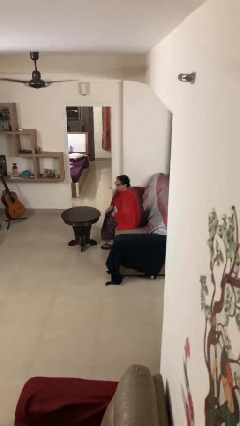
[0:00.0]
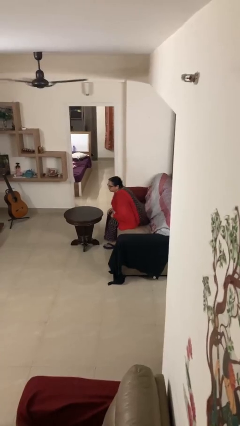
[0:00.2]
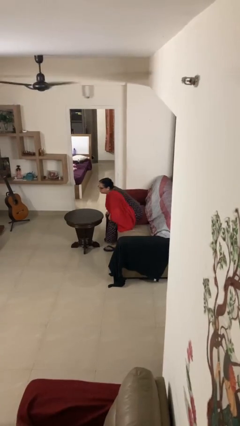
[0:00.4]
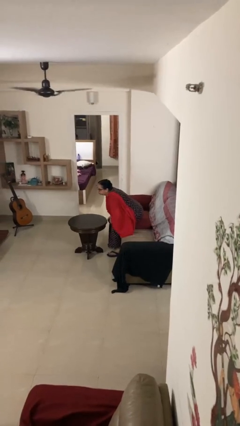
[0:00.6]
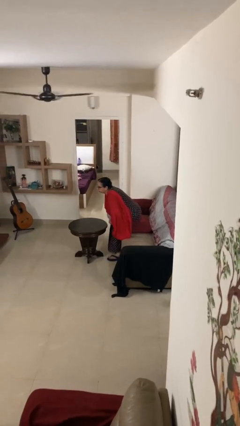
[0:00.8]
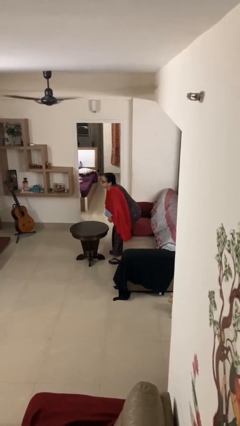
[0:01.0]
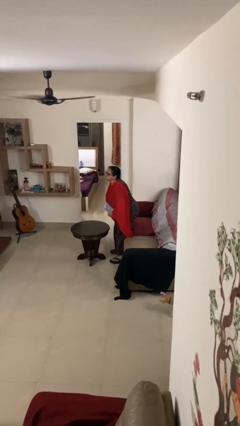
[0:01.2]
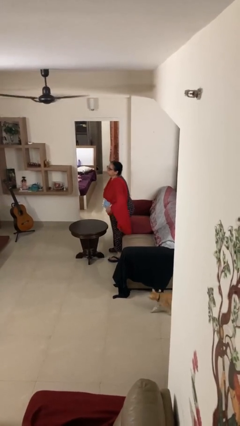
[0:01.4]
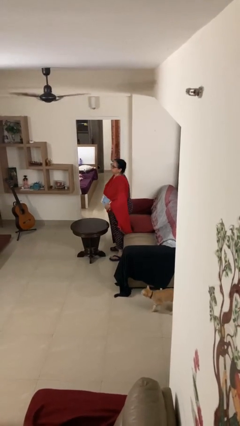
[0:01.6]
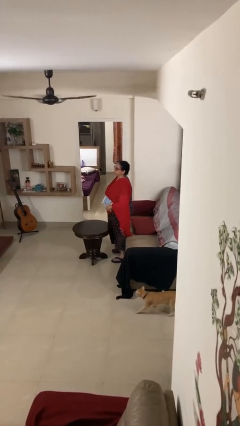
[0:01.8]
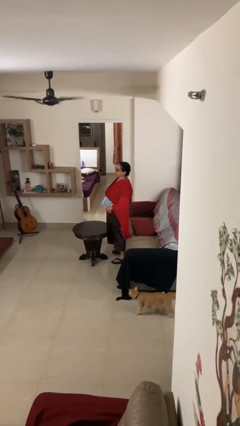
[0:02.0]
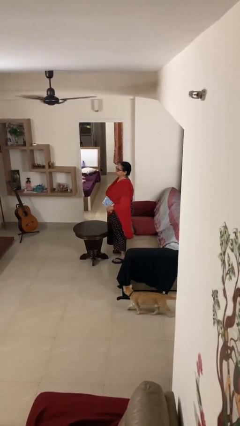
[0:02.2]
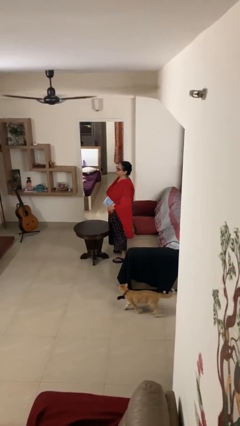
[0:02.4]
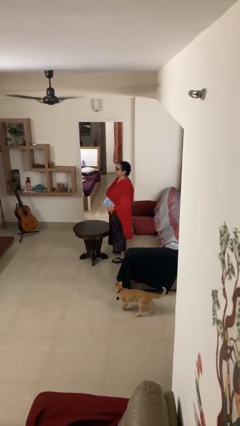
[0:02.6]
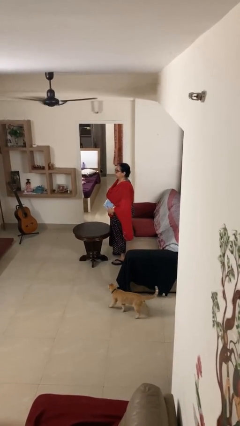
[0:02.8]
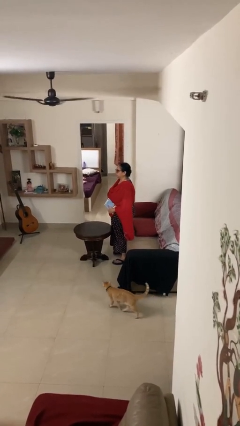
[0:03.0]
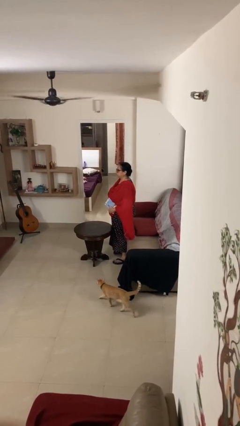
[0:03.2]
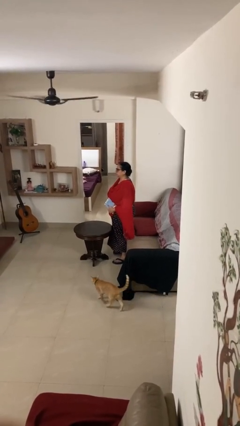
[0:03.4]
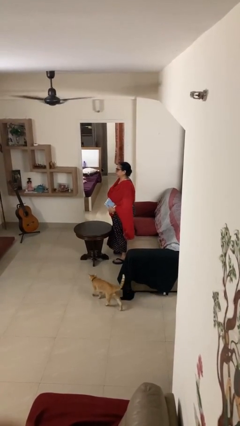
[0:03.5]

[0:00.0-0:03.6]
person stands up

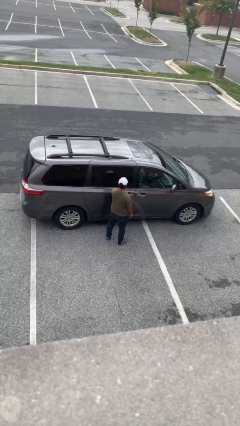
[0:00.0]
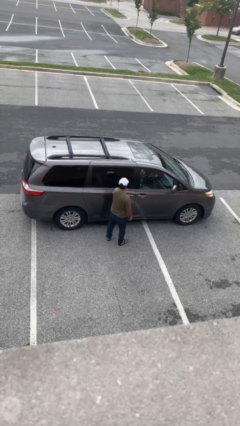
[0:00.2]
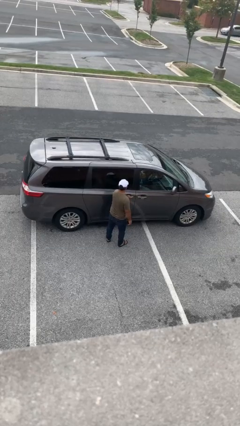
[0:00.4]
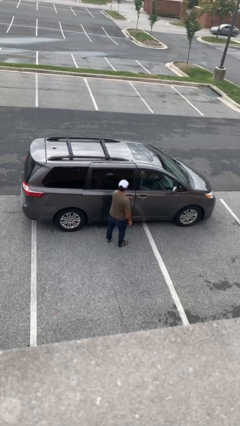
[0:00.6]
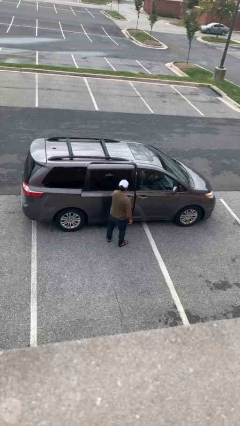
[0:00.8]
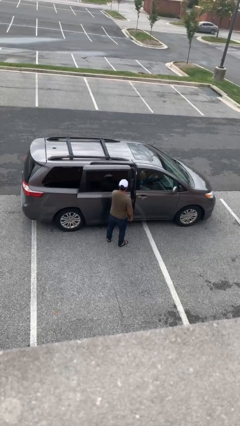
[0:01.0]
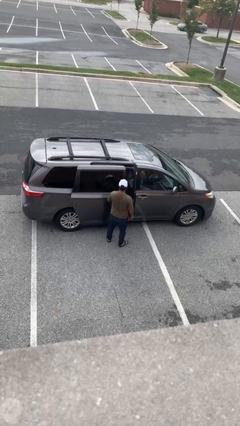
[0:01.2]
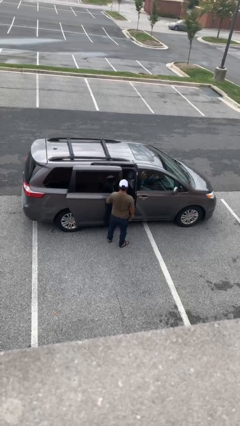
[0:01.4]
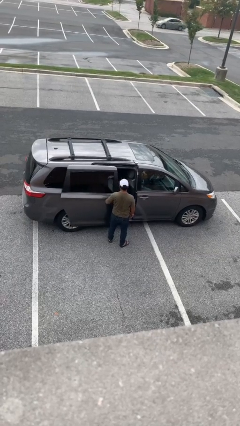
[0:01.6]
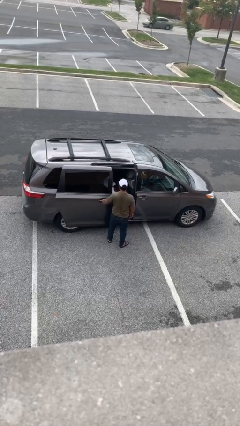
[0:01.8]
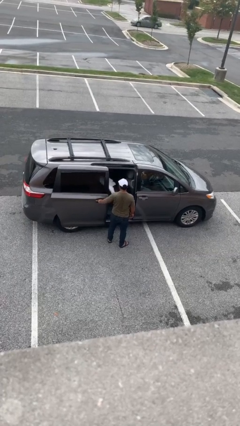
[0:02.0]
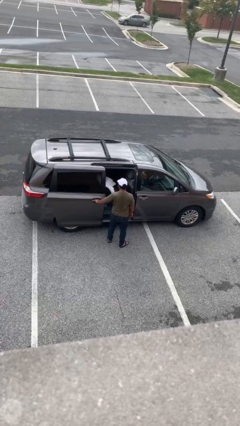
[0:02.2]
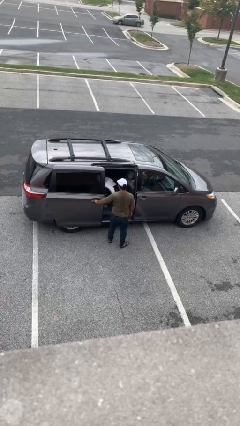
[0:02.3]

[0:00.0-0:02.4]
person opens car door

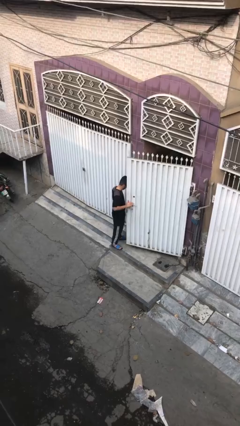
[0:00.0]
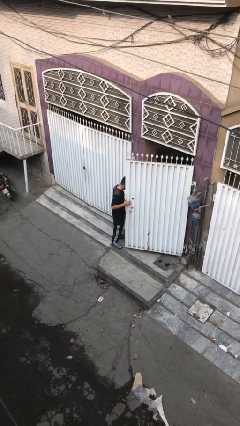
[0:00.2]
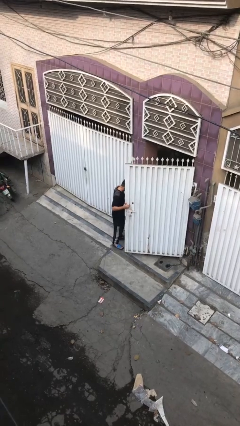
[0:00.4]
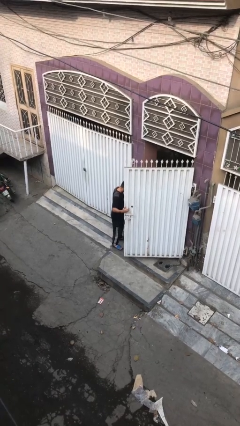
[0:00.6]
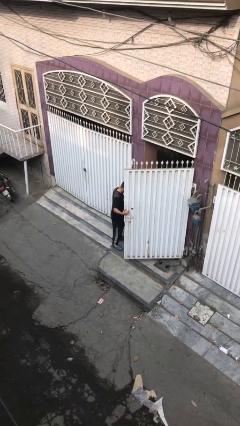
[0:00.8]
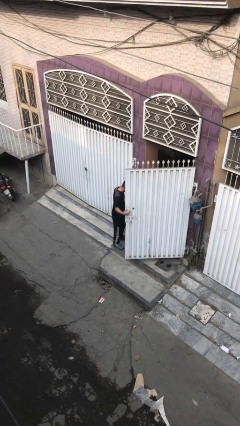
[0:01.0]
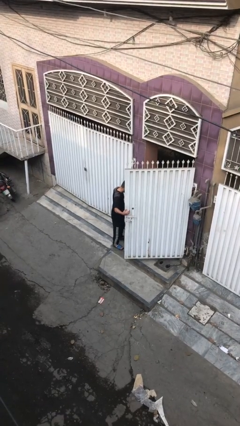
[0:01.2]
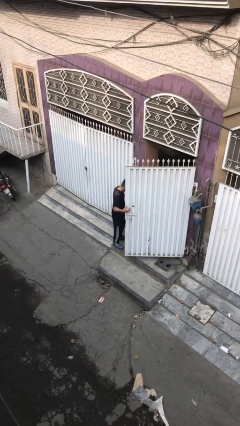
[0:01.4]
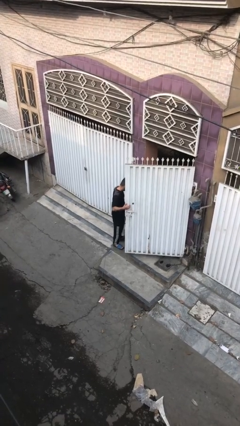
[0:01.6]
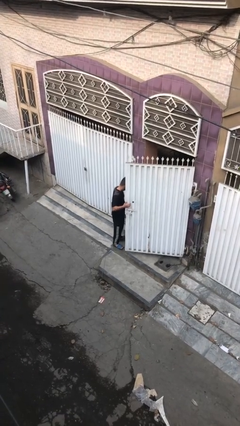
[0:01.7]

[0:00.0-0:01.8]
person opens facility door

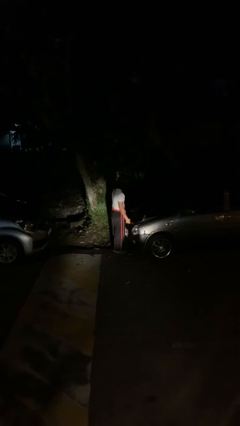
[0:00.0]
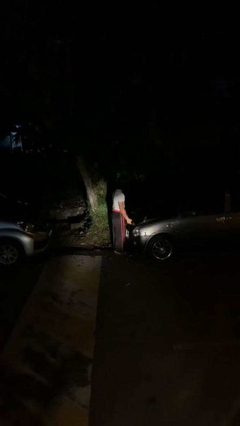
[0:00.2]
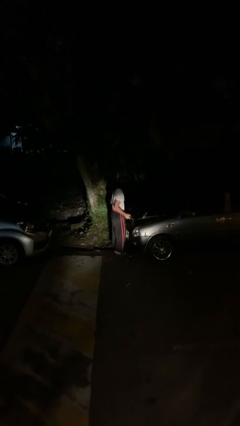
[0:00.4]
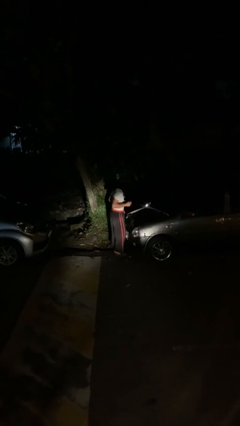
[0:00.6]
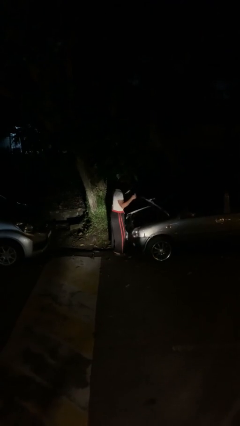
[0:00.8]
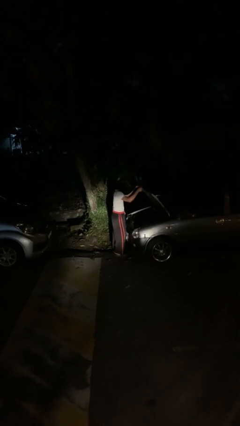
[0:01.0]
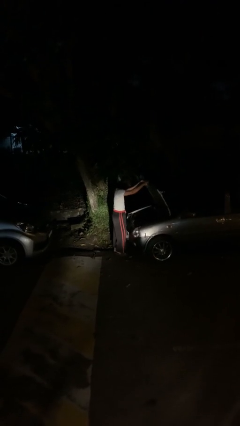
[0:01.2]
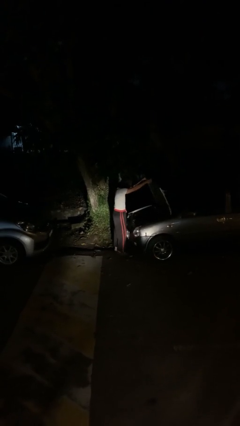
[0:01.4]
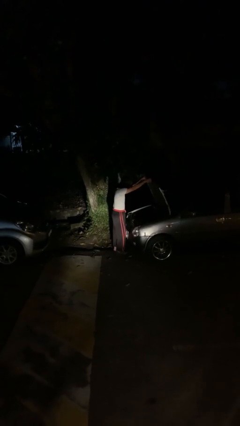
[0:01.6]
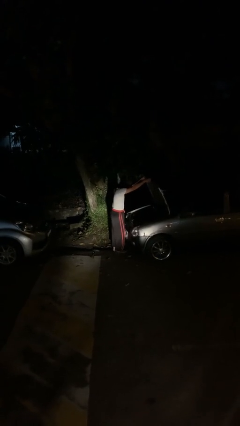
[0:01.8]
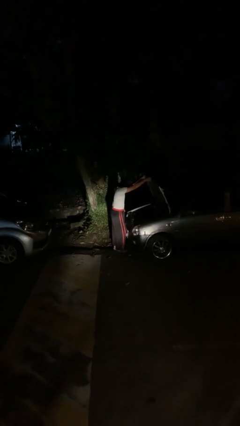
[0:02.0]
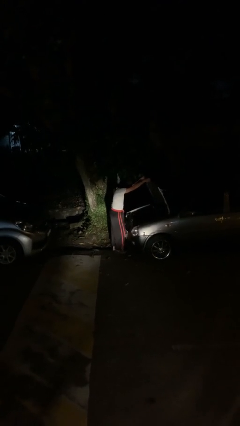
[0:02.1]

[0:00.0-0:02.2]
person opens car hood

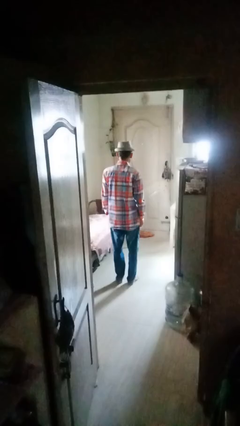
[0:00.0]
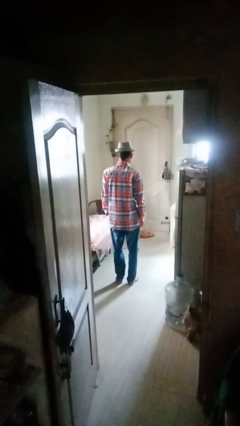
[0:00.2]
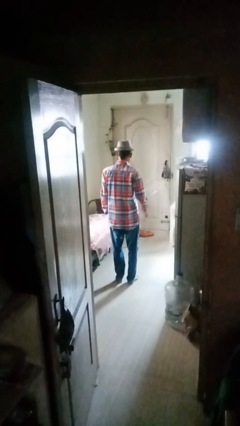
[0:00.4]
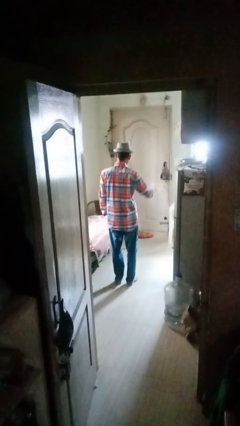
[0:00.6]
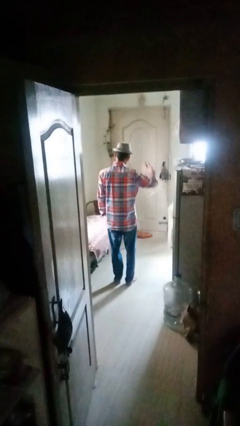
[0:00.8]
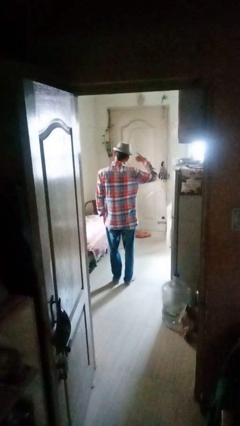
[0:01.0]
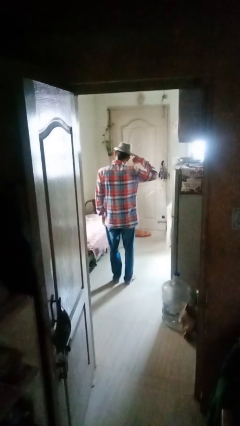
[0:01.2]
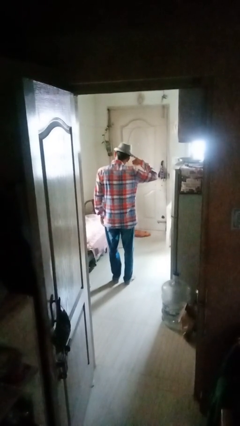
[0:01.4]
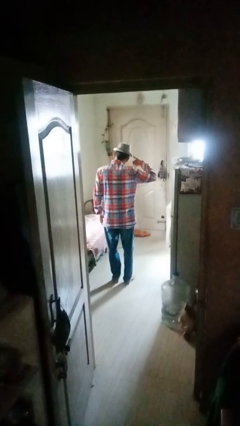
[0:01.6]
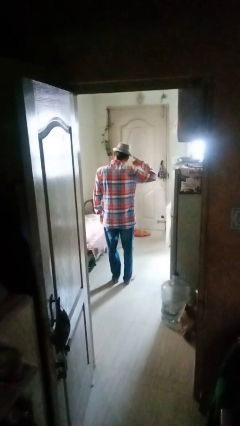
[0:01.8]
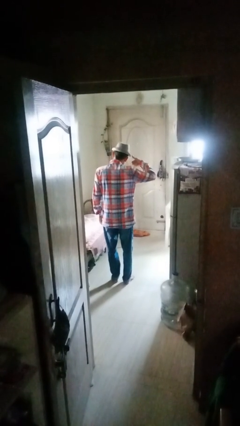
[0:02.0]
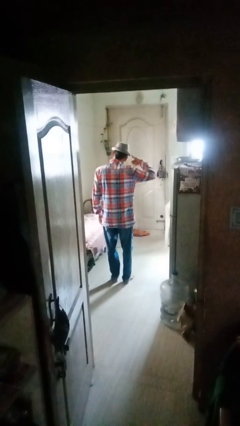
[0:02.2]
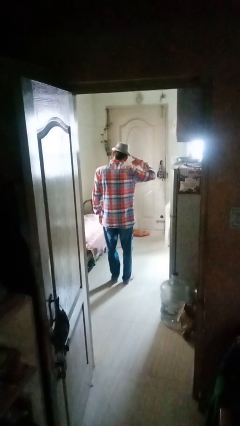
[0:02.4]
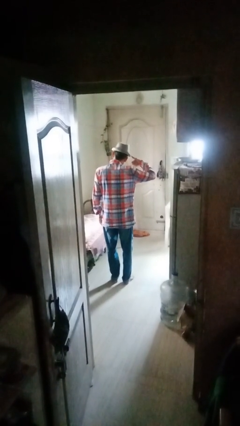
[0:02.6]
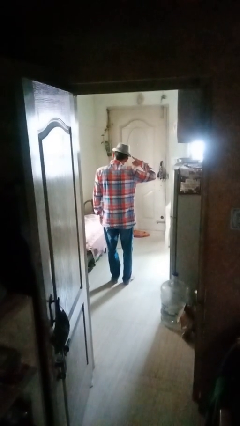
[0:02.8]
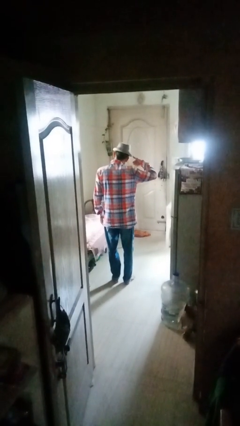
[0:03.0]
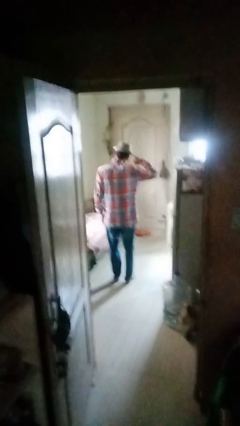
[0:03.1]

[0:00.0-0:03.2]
person gestures call me

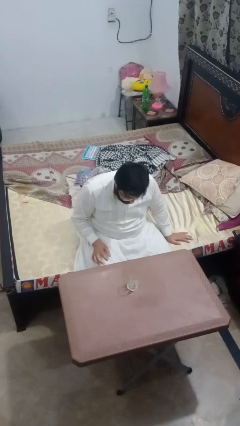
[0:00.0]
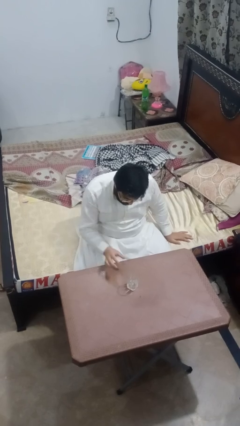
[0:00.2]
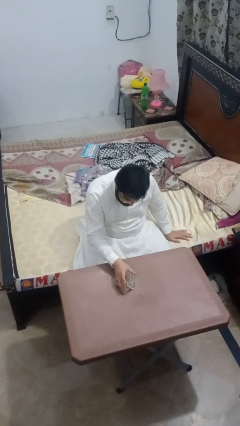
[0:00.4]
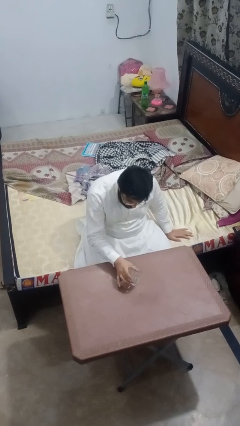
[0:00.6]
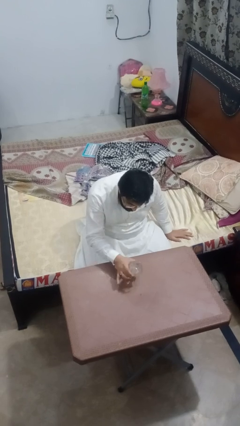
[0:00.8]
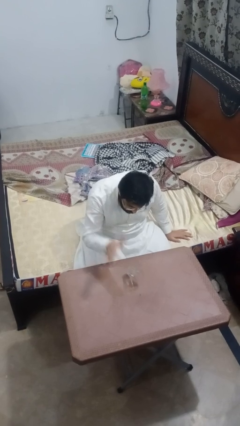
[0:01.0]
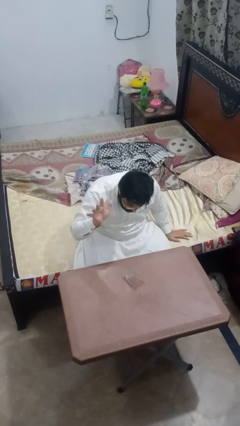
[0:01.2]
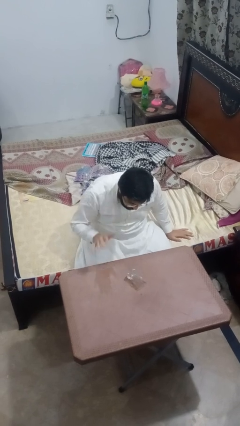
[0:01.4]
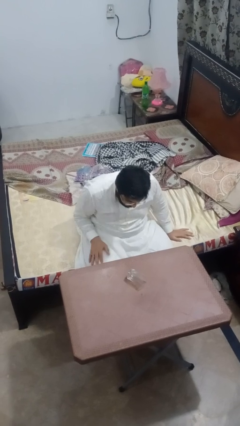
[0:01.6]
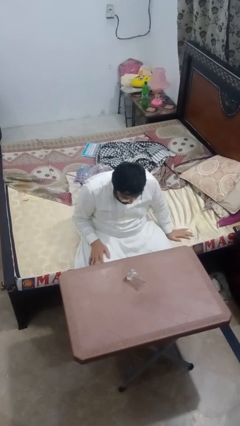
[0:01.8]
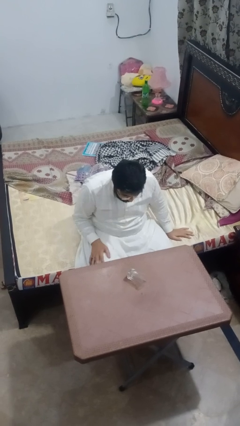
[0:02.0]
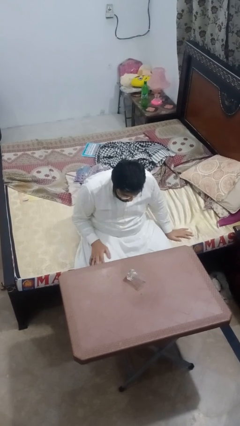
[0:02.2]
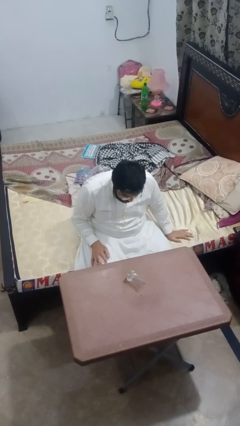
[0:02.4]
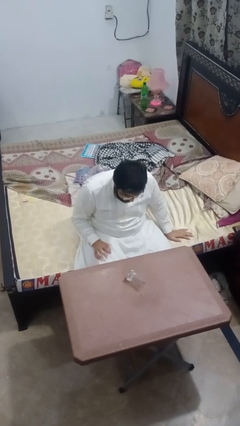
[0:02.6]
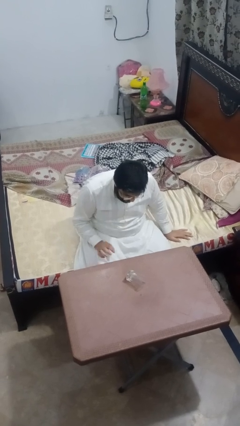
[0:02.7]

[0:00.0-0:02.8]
person knocks over glass

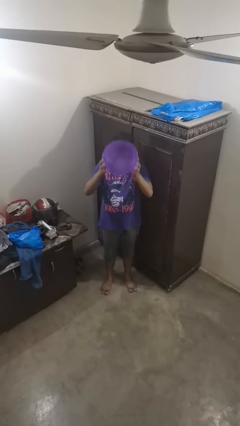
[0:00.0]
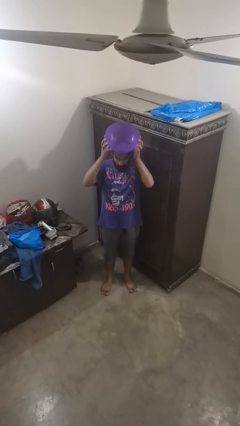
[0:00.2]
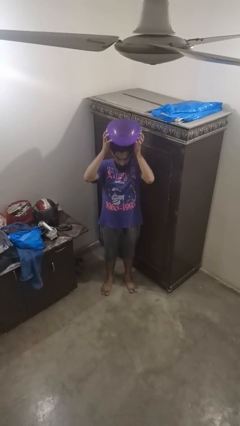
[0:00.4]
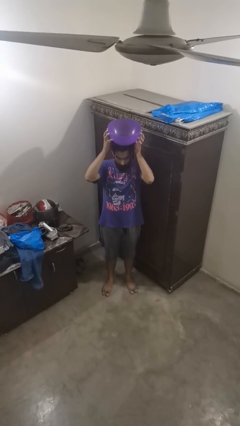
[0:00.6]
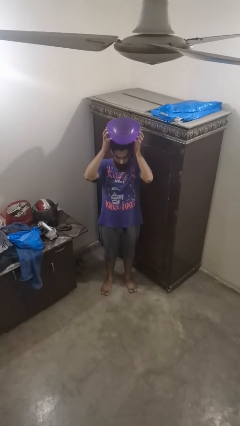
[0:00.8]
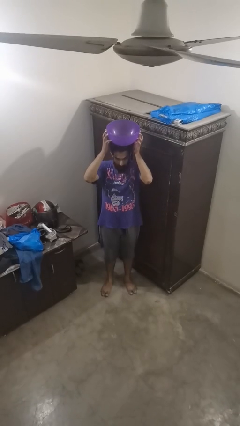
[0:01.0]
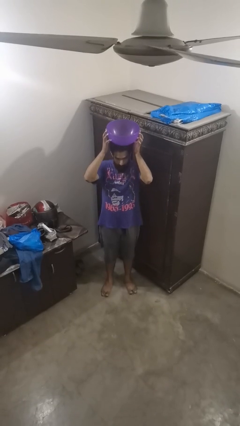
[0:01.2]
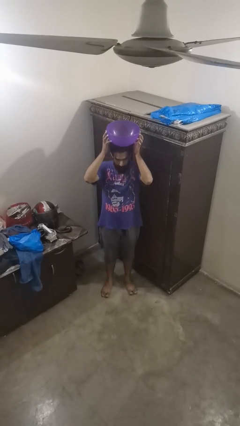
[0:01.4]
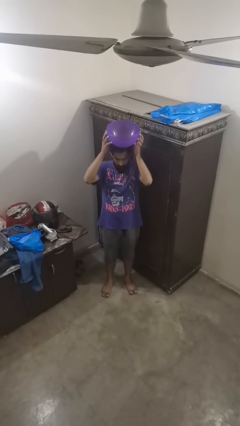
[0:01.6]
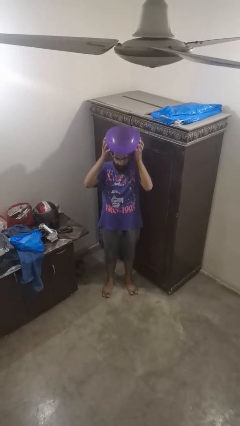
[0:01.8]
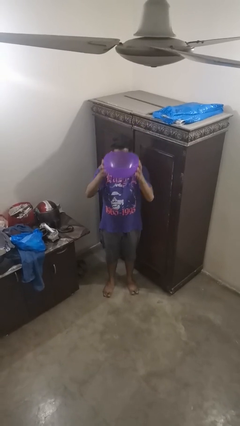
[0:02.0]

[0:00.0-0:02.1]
person holds object above head
